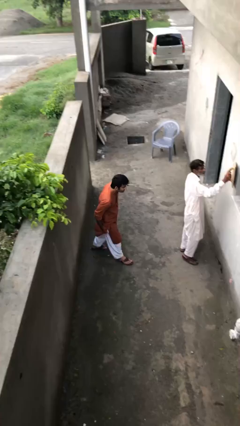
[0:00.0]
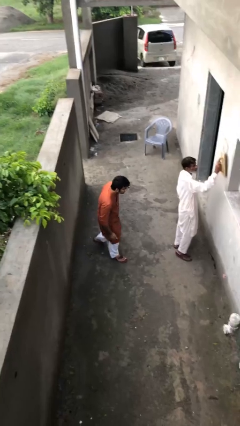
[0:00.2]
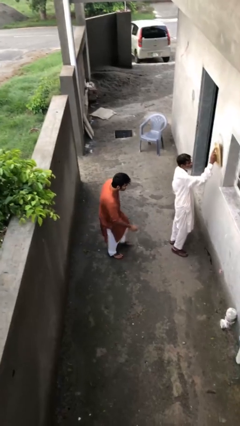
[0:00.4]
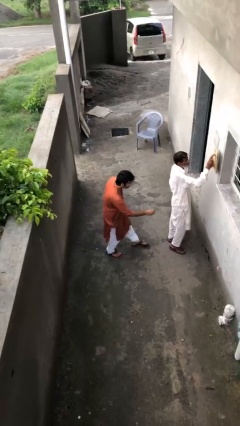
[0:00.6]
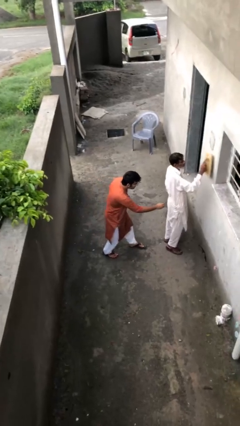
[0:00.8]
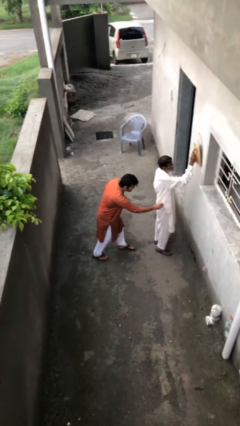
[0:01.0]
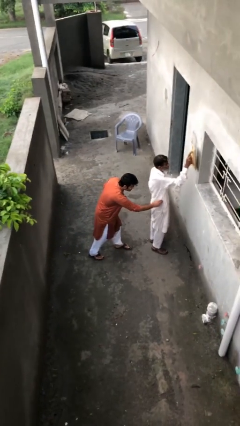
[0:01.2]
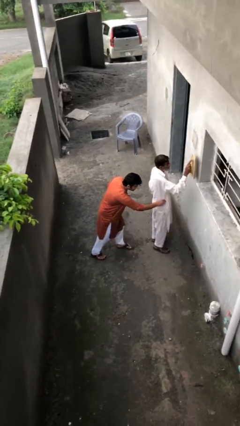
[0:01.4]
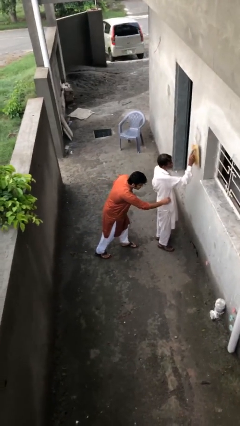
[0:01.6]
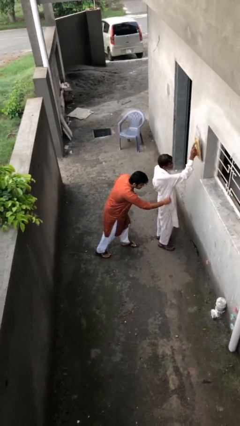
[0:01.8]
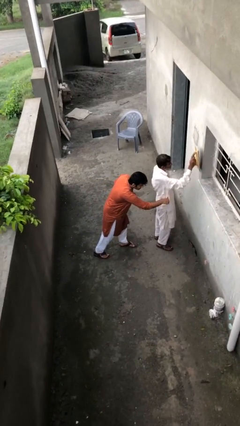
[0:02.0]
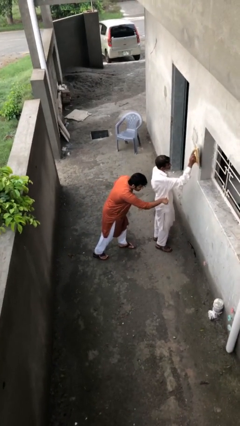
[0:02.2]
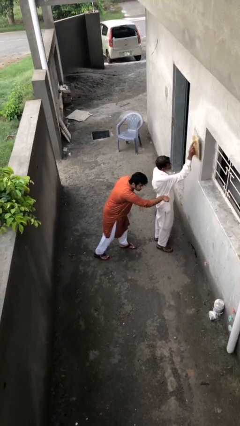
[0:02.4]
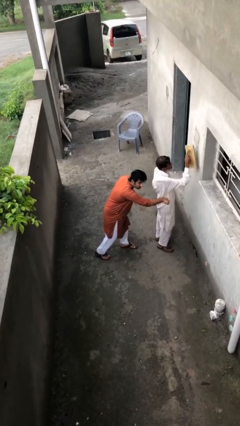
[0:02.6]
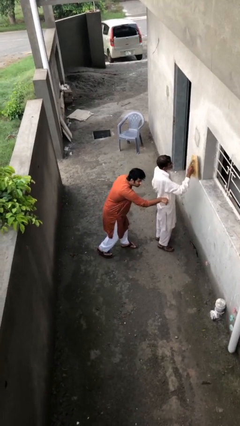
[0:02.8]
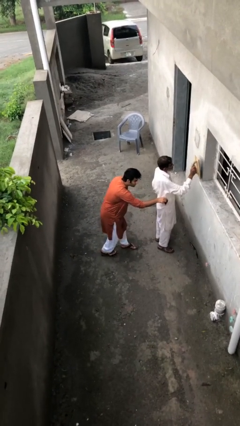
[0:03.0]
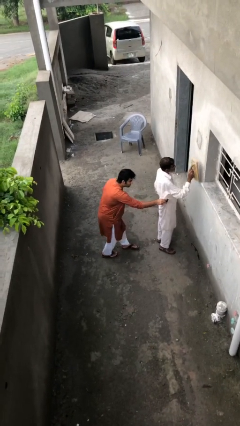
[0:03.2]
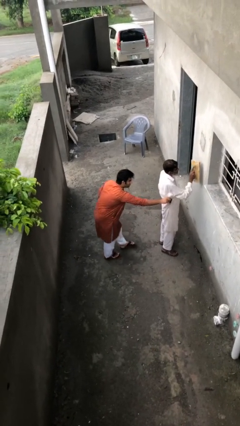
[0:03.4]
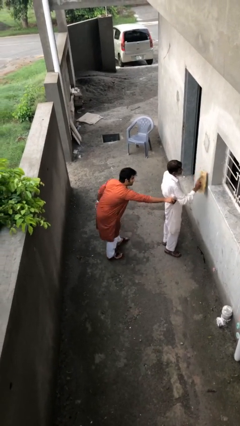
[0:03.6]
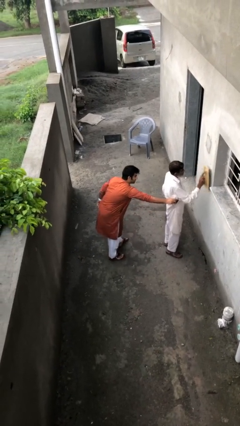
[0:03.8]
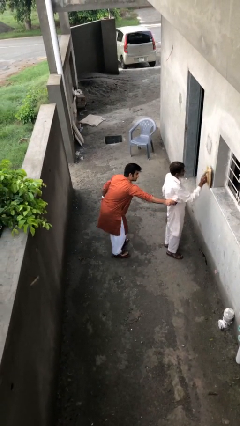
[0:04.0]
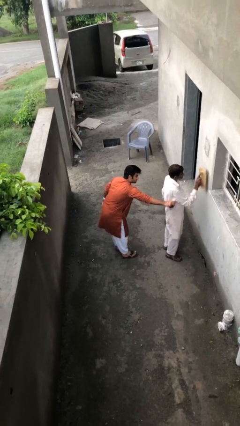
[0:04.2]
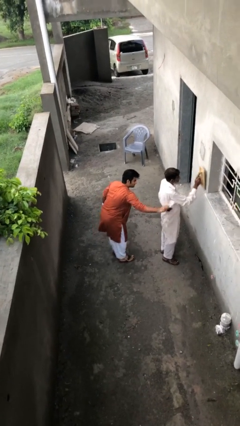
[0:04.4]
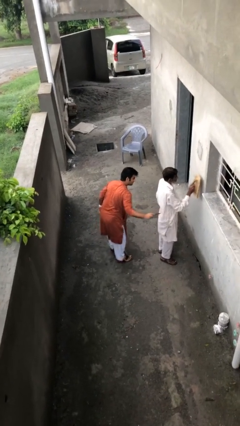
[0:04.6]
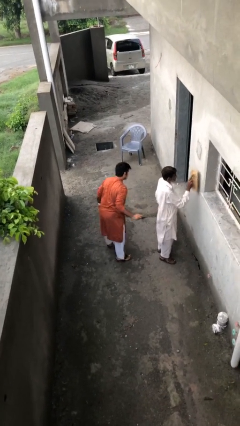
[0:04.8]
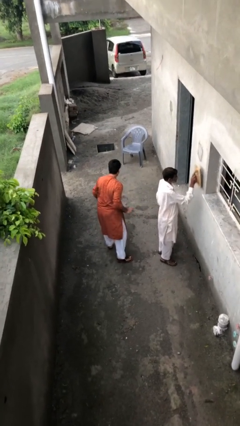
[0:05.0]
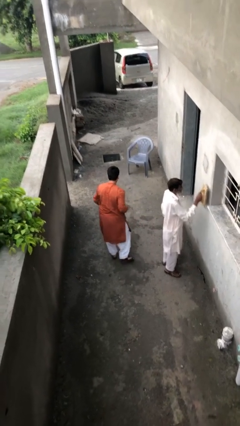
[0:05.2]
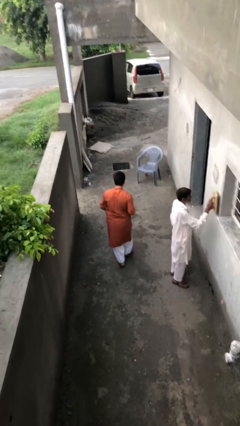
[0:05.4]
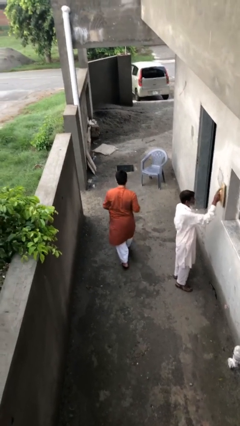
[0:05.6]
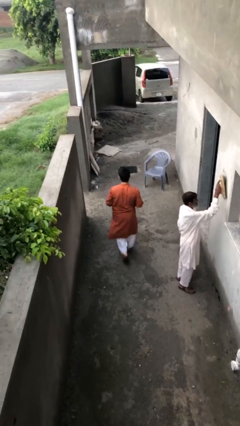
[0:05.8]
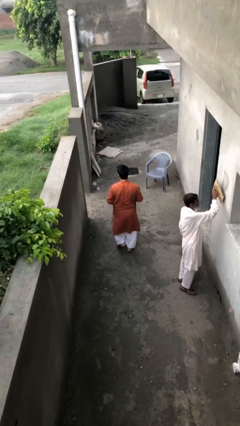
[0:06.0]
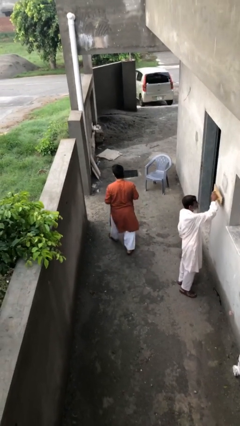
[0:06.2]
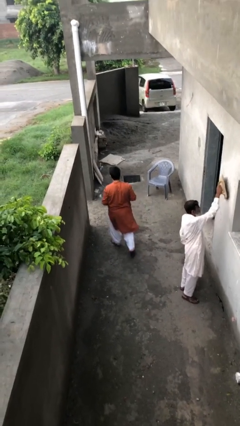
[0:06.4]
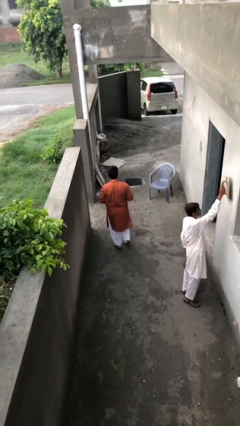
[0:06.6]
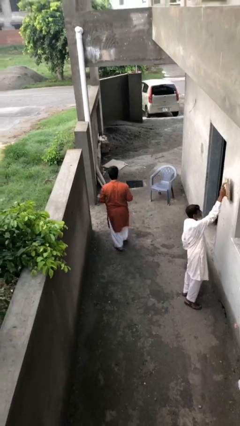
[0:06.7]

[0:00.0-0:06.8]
person steals object from person

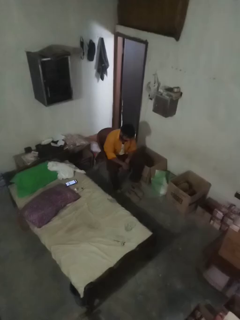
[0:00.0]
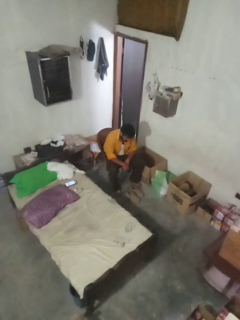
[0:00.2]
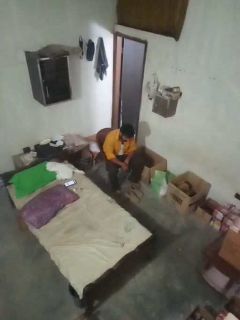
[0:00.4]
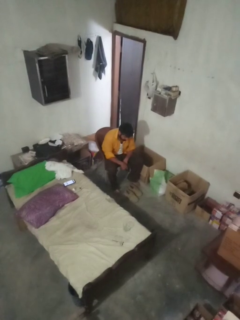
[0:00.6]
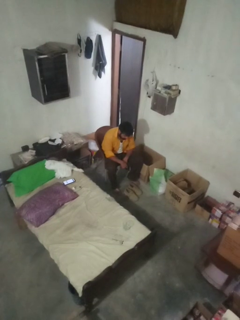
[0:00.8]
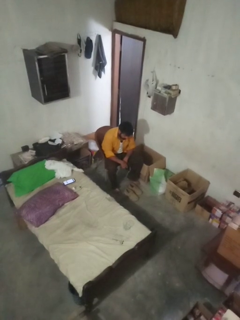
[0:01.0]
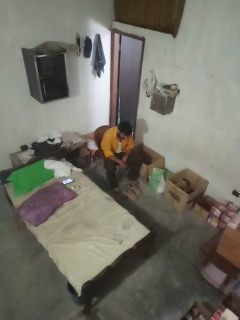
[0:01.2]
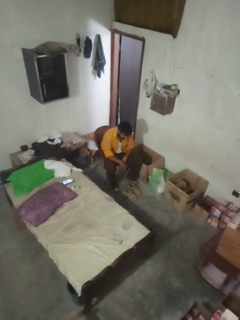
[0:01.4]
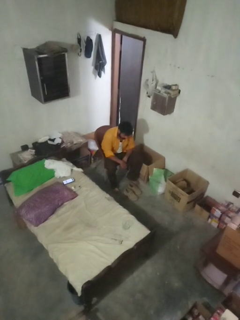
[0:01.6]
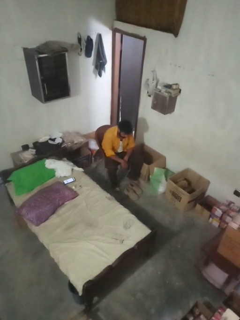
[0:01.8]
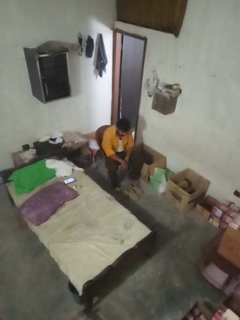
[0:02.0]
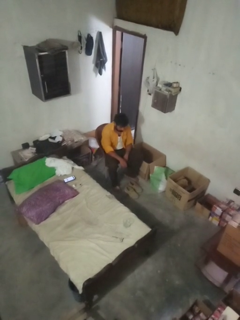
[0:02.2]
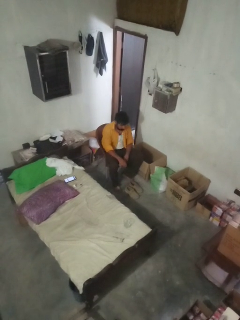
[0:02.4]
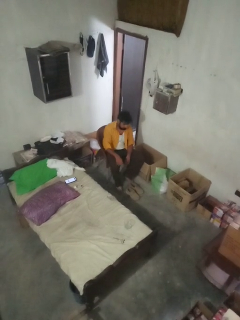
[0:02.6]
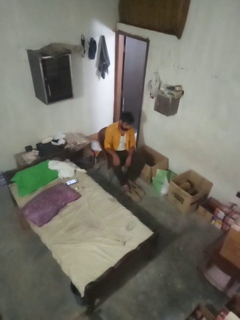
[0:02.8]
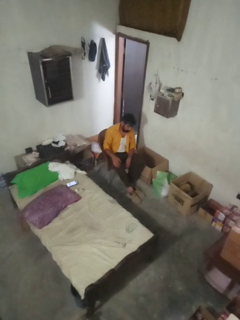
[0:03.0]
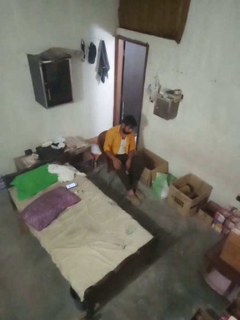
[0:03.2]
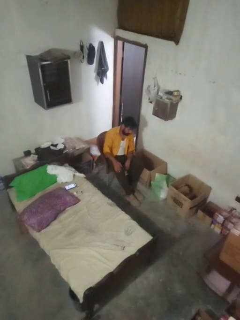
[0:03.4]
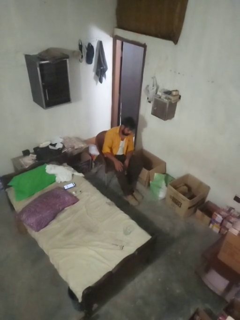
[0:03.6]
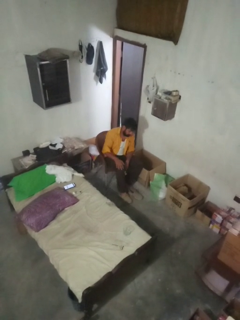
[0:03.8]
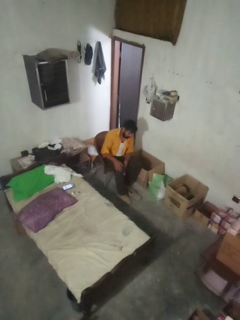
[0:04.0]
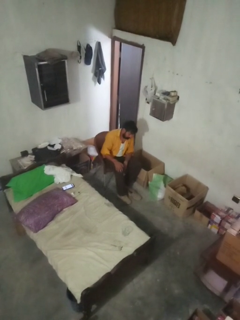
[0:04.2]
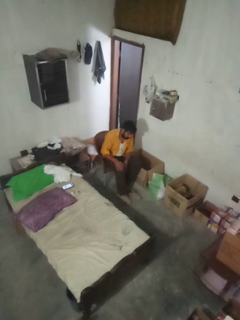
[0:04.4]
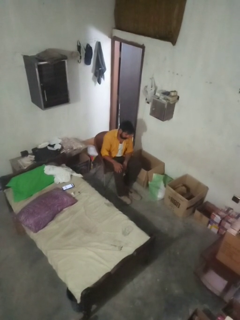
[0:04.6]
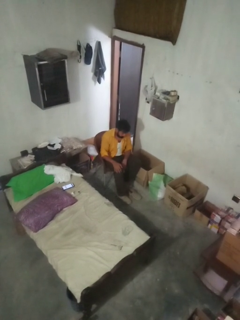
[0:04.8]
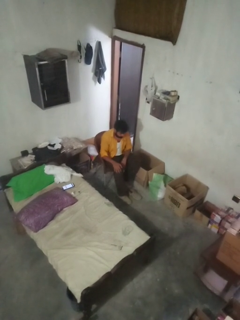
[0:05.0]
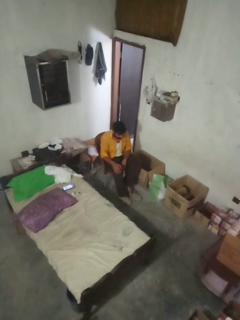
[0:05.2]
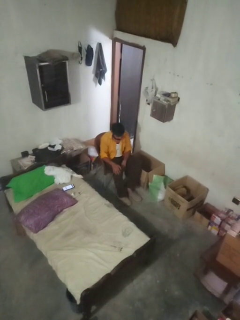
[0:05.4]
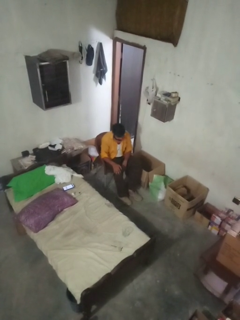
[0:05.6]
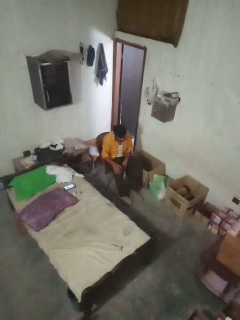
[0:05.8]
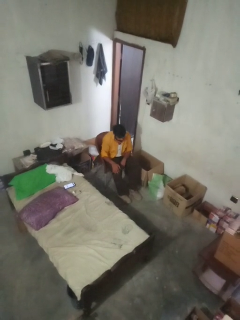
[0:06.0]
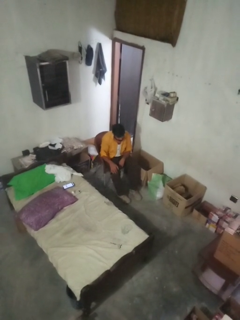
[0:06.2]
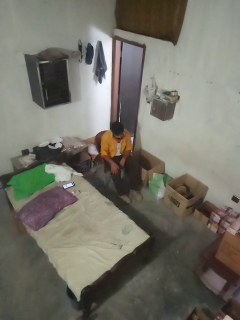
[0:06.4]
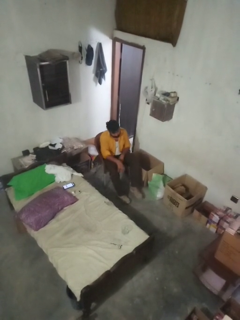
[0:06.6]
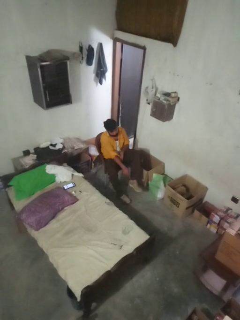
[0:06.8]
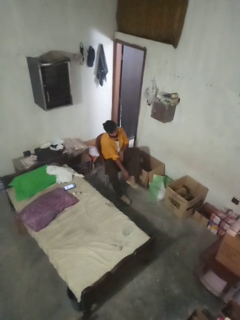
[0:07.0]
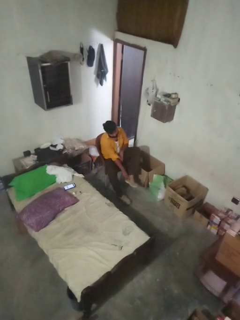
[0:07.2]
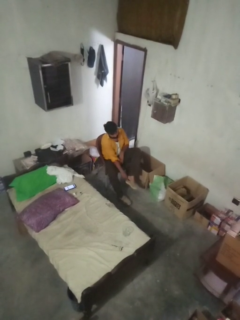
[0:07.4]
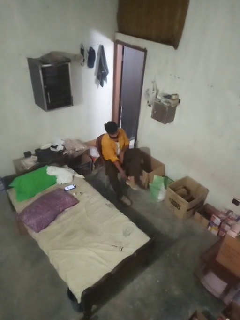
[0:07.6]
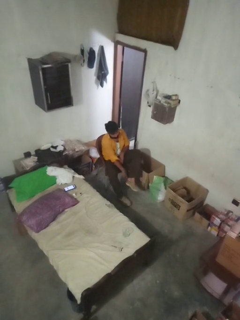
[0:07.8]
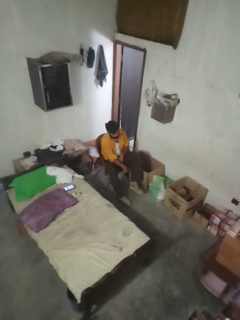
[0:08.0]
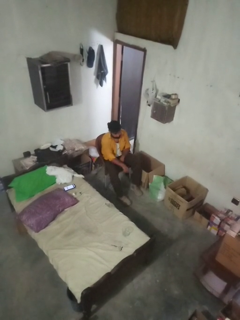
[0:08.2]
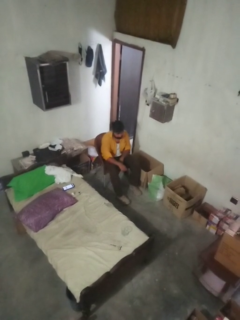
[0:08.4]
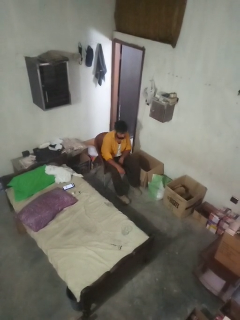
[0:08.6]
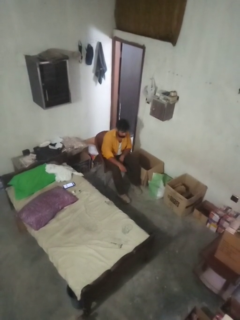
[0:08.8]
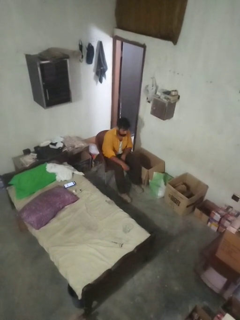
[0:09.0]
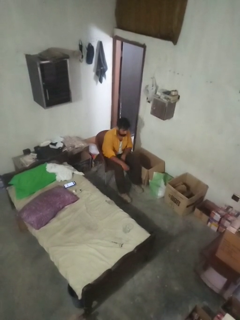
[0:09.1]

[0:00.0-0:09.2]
person puts on boots

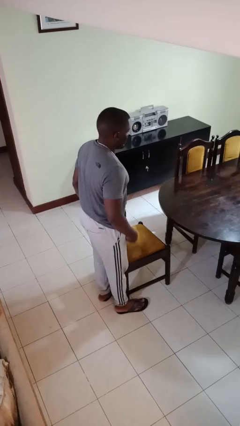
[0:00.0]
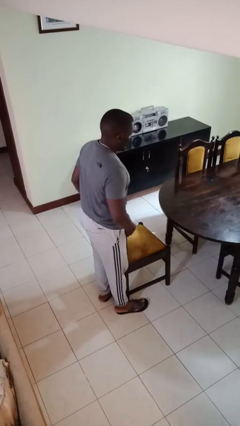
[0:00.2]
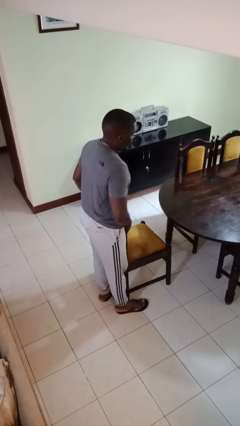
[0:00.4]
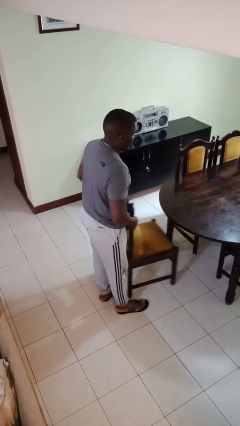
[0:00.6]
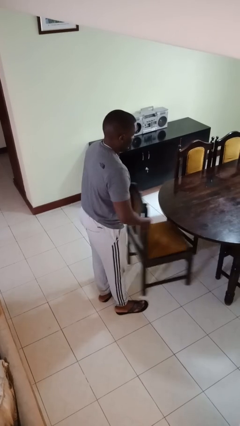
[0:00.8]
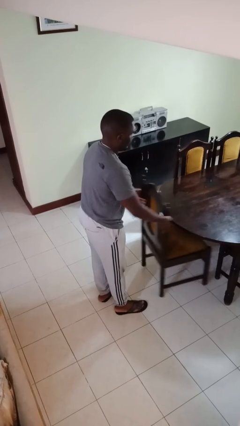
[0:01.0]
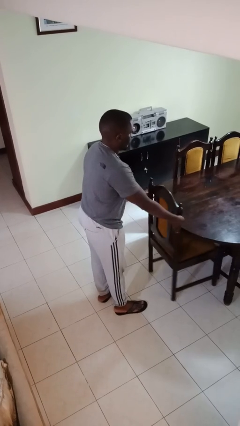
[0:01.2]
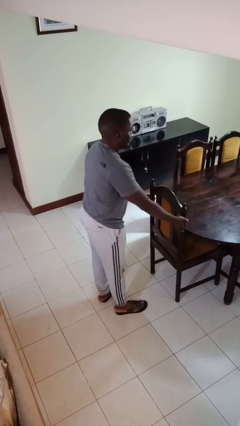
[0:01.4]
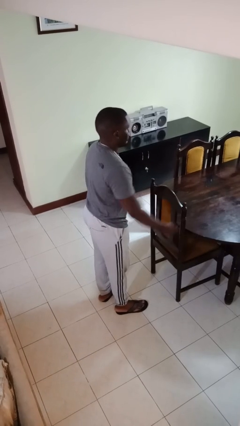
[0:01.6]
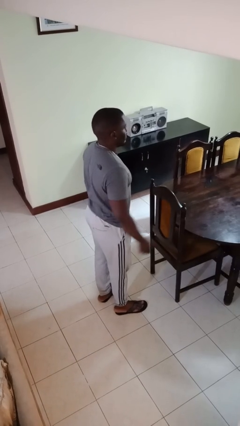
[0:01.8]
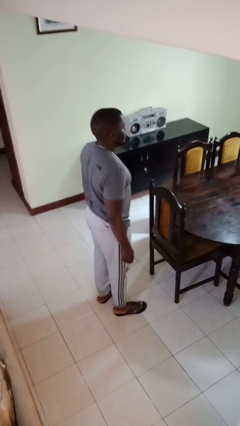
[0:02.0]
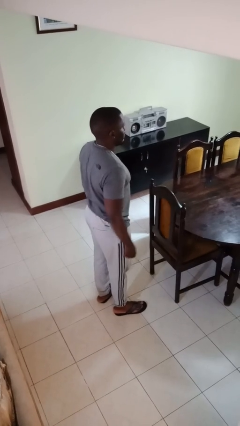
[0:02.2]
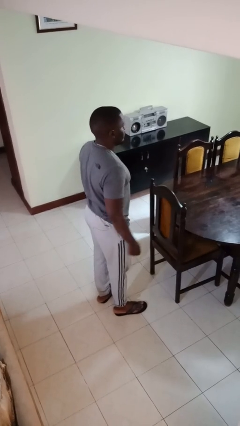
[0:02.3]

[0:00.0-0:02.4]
person pushes in chair

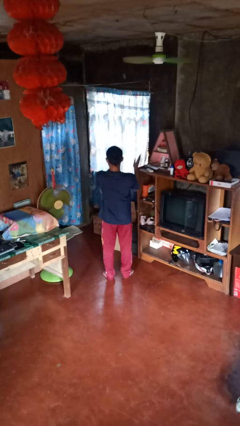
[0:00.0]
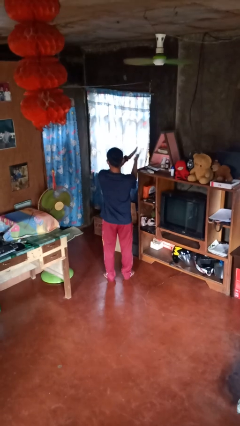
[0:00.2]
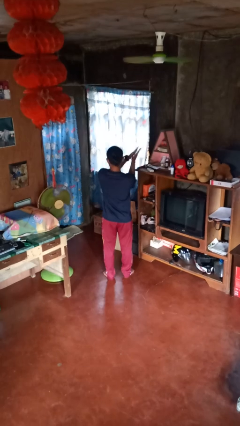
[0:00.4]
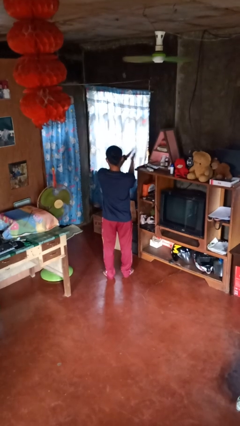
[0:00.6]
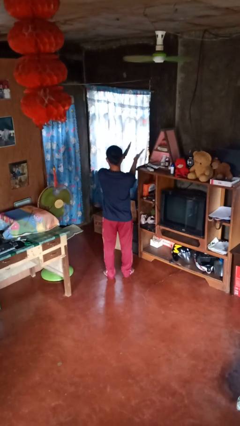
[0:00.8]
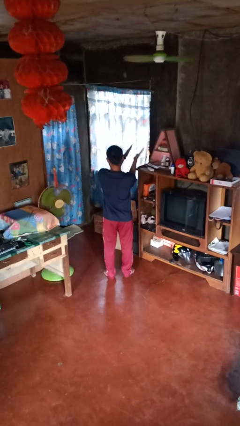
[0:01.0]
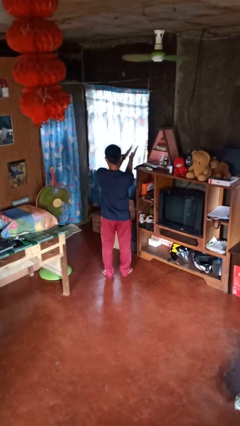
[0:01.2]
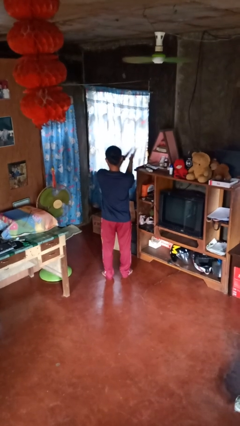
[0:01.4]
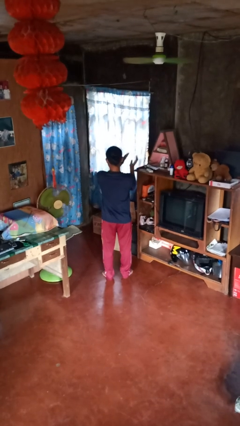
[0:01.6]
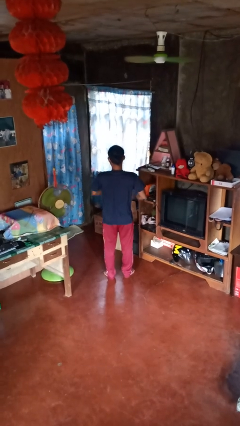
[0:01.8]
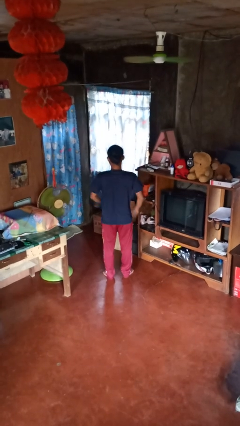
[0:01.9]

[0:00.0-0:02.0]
person claps hands
